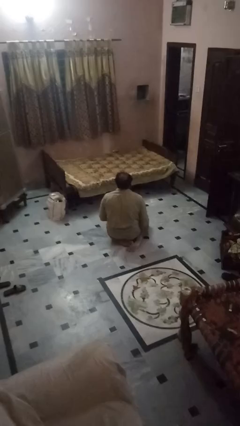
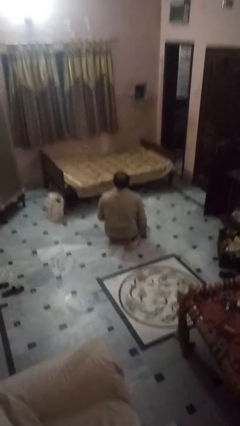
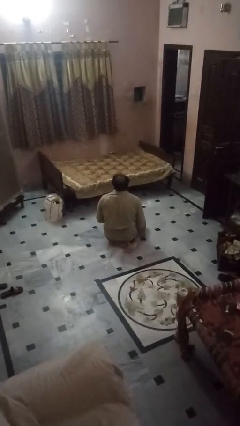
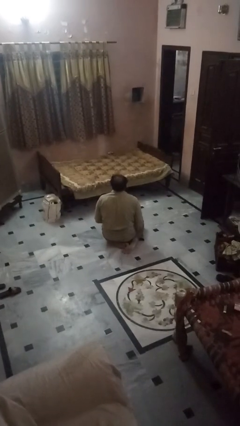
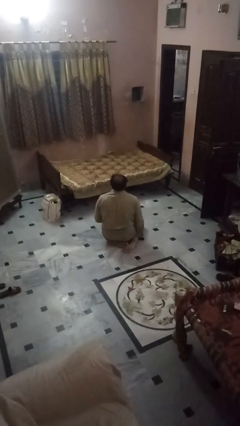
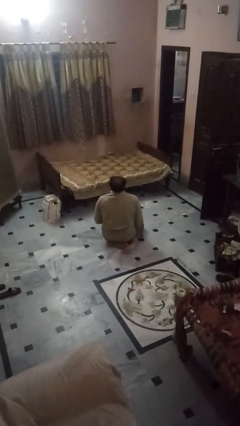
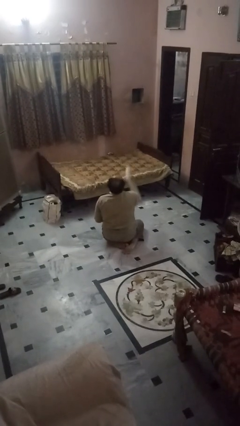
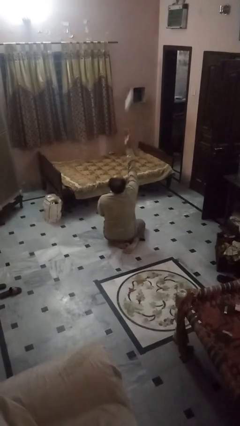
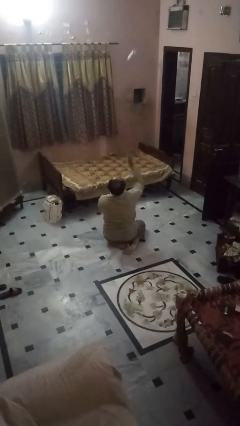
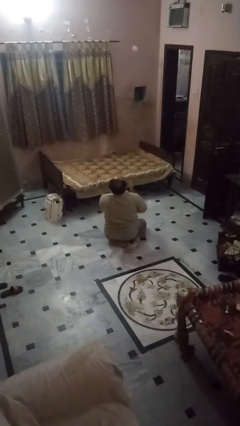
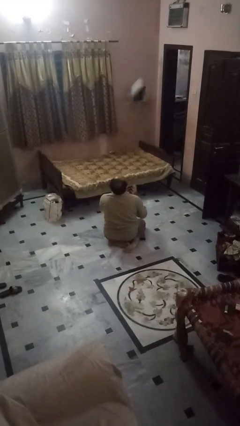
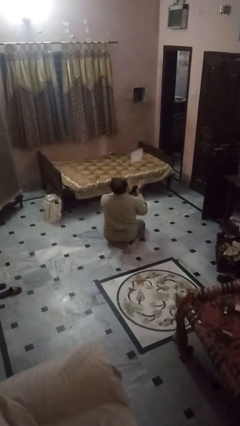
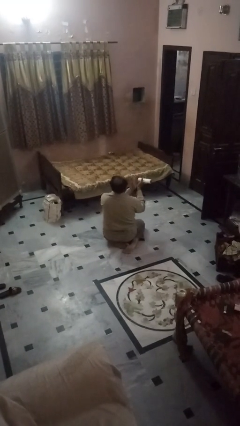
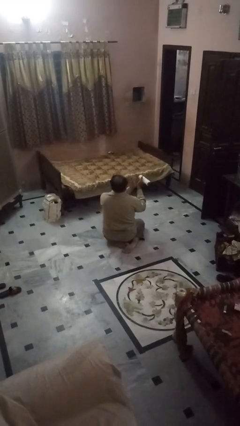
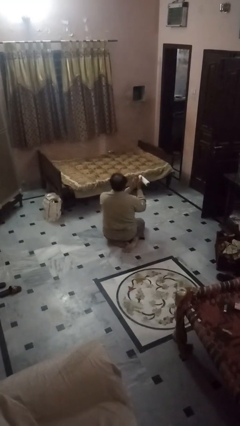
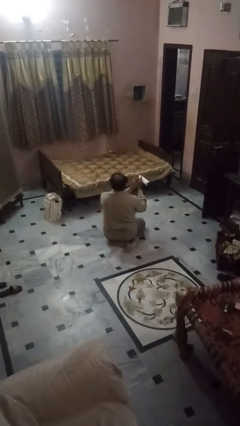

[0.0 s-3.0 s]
person drops object

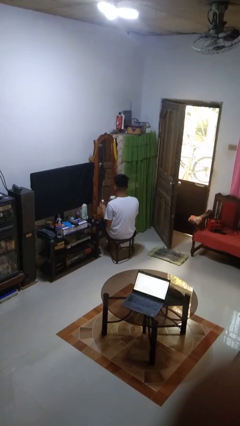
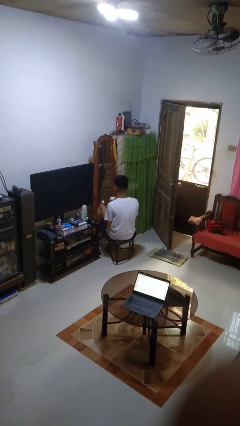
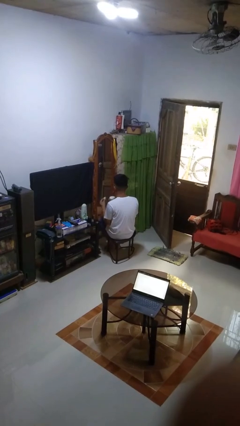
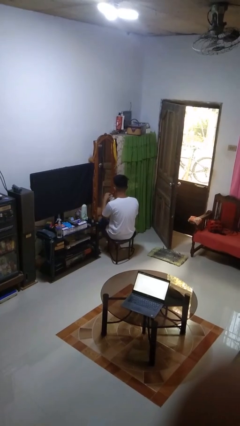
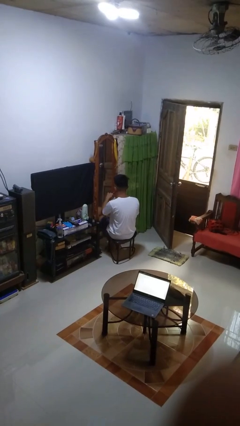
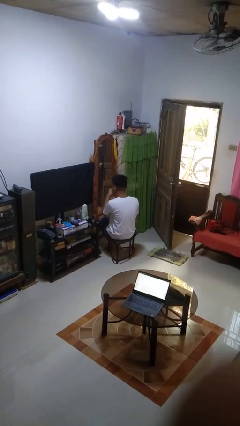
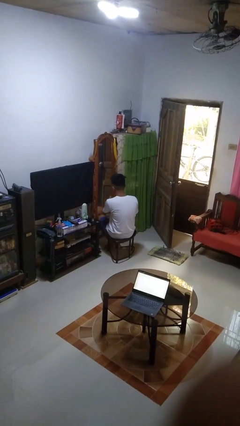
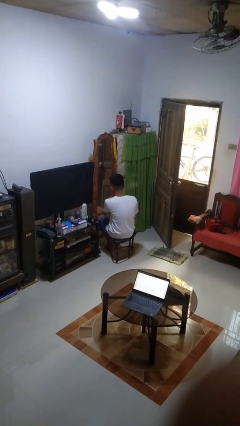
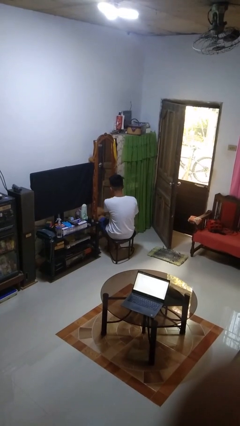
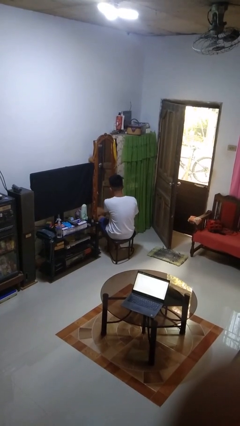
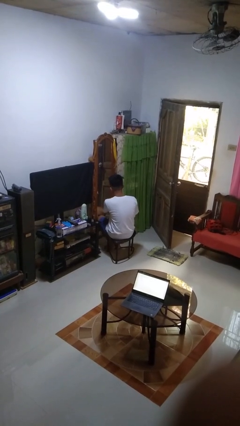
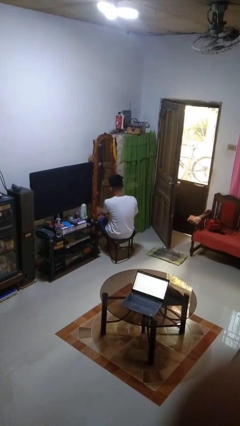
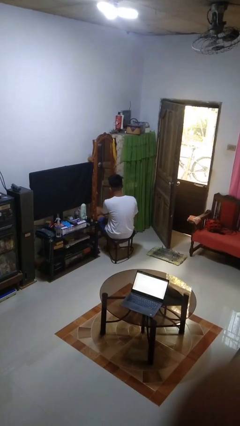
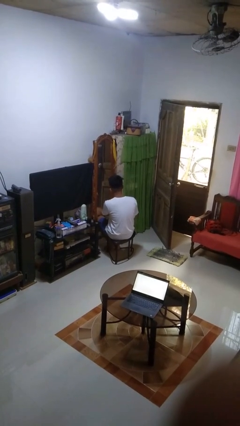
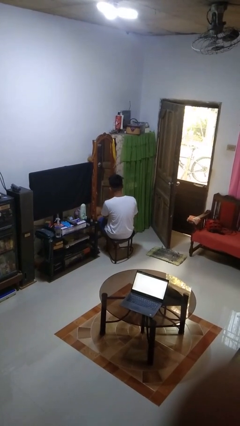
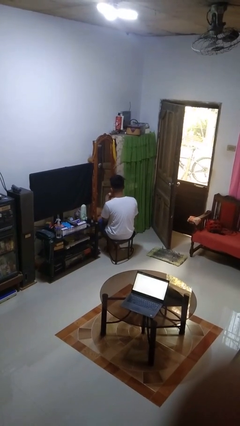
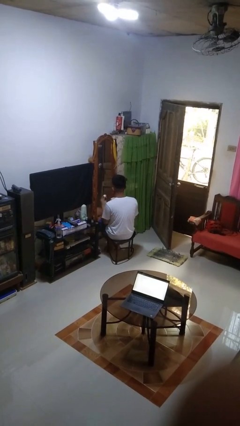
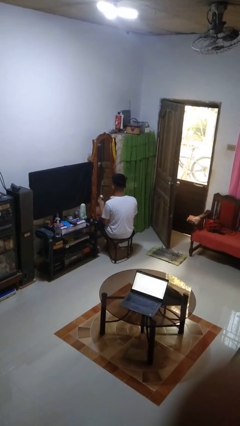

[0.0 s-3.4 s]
person applies foundation makeup

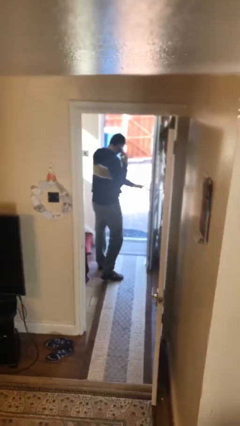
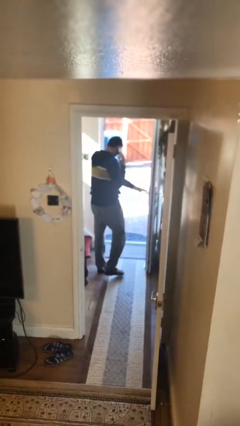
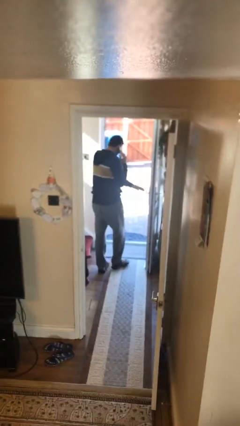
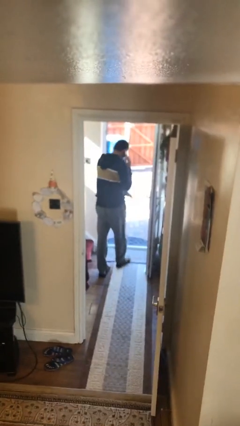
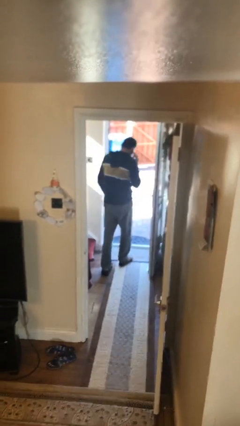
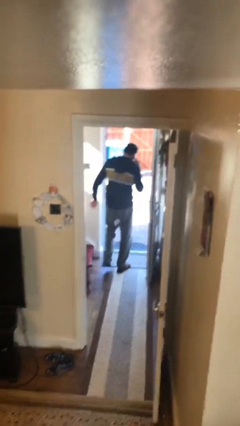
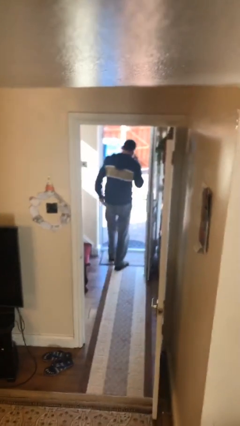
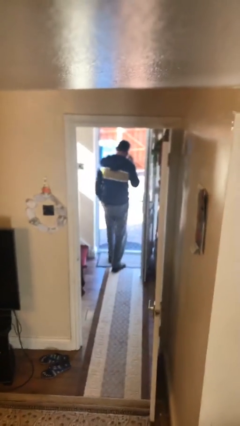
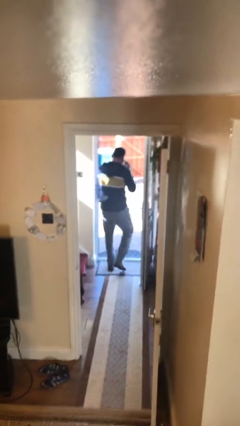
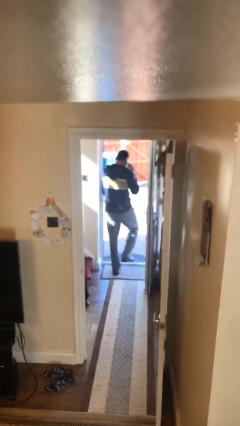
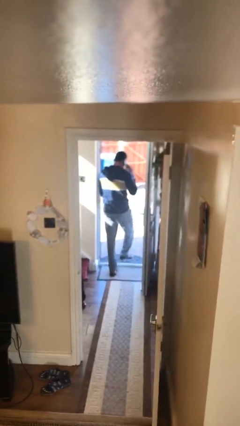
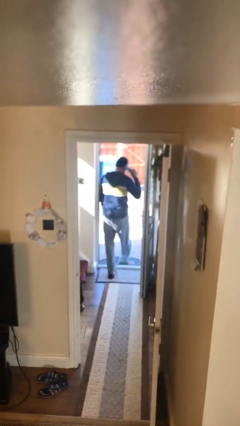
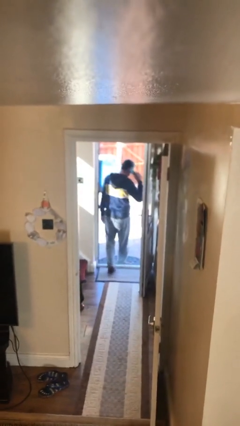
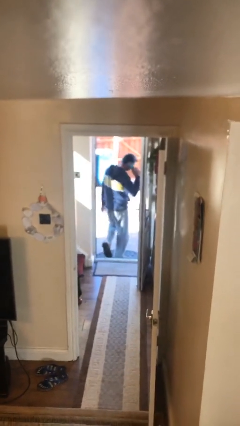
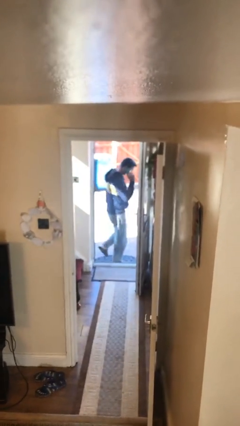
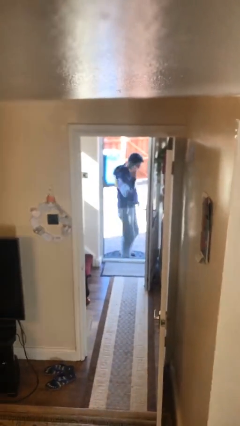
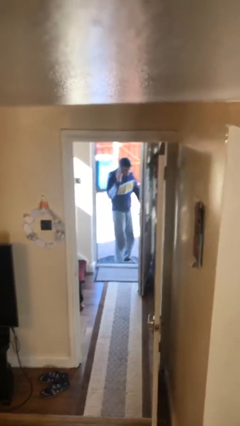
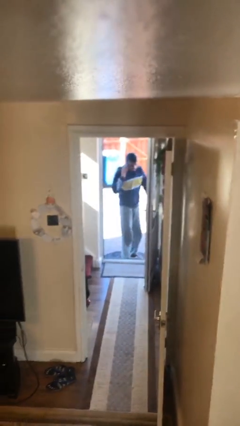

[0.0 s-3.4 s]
person exits scene through structure

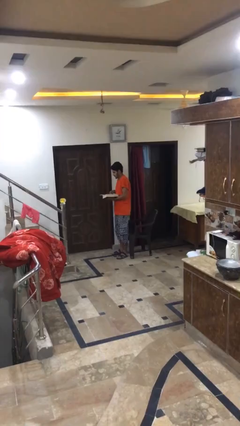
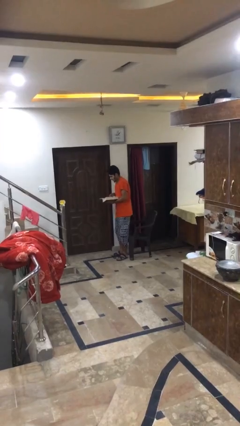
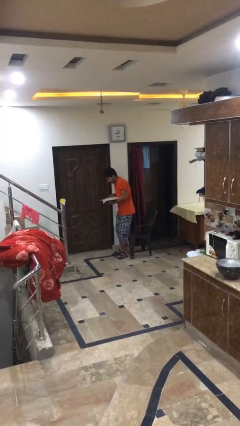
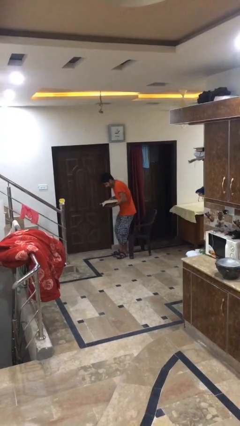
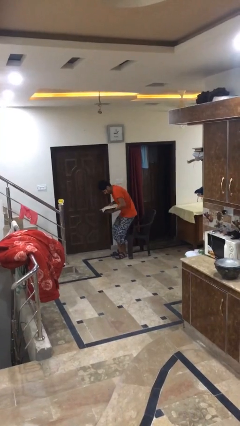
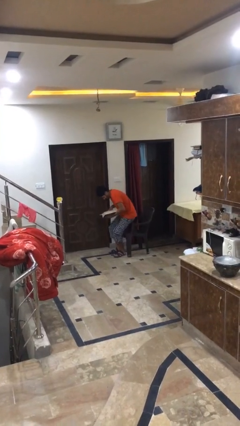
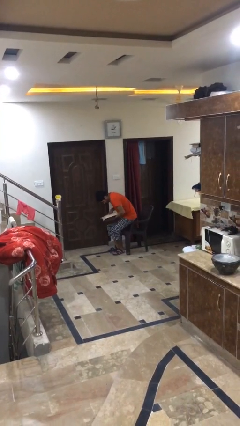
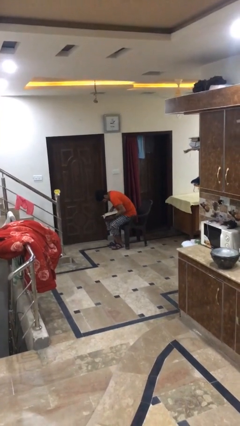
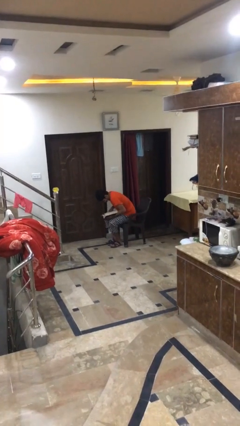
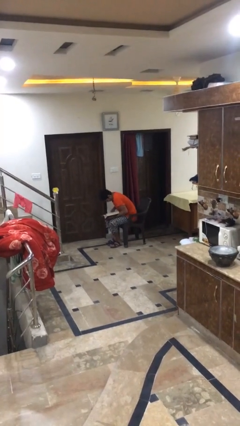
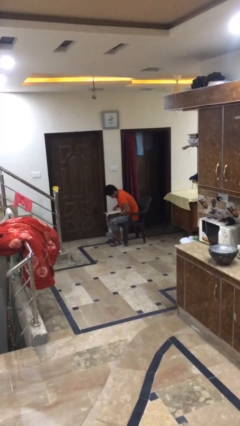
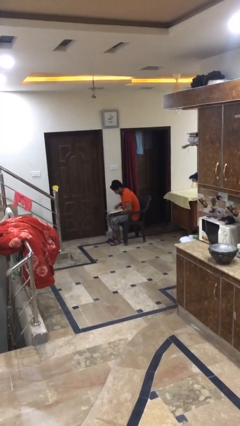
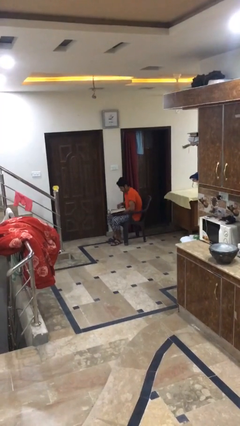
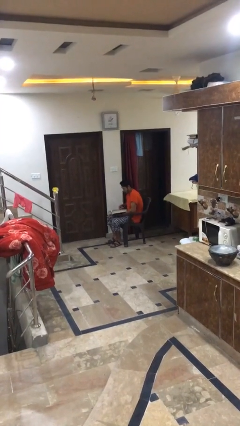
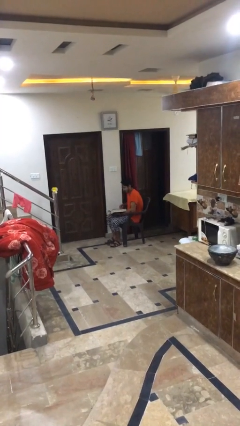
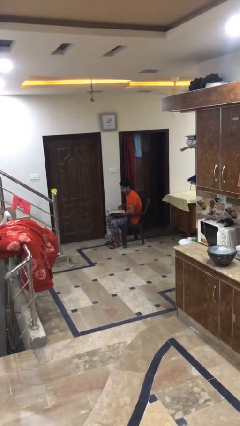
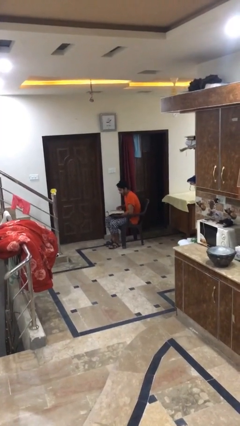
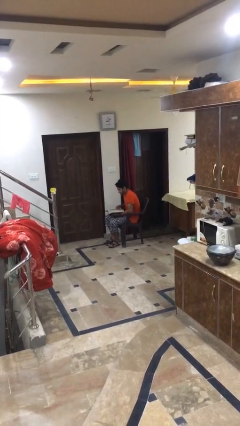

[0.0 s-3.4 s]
person sits down

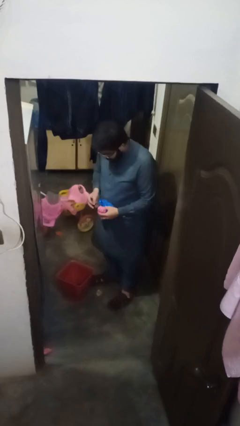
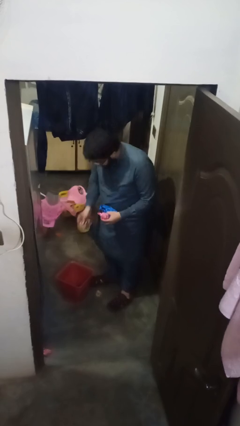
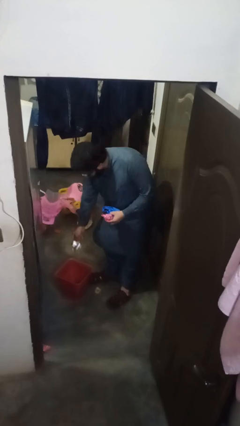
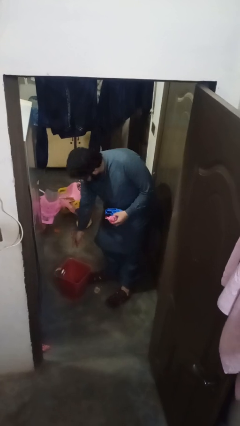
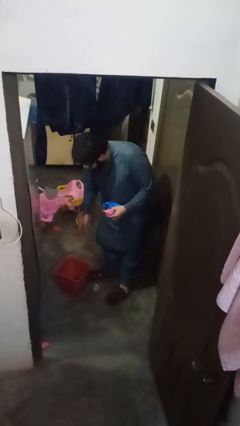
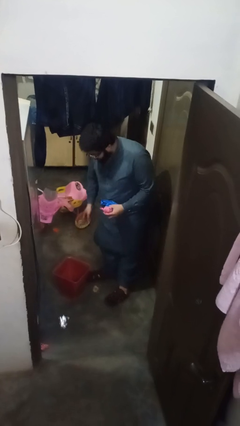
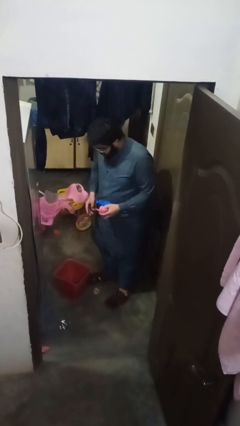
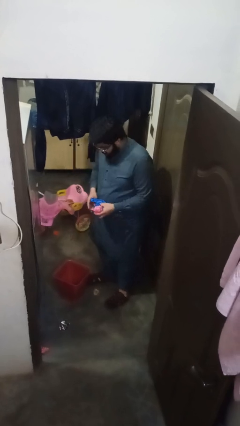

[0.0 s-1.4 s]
person discards trash

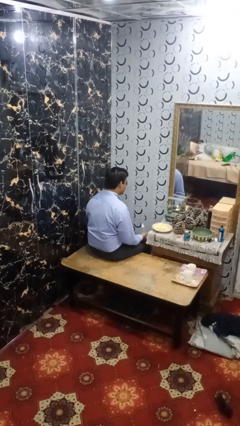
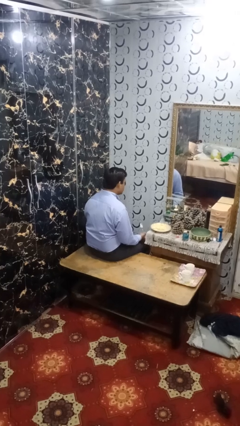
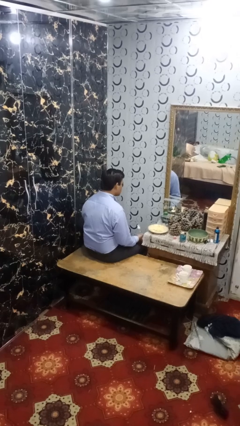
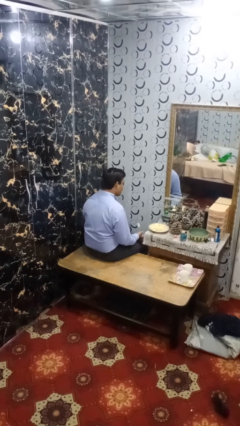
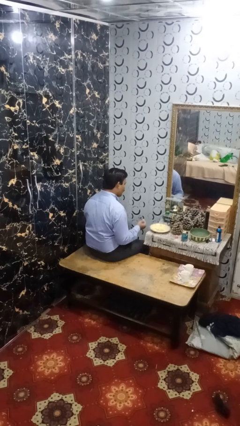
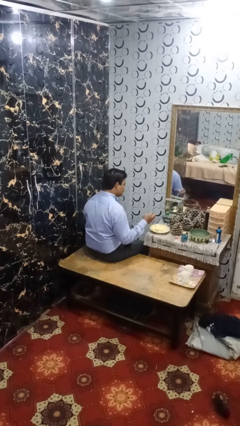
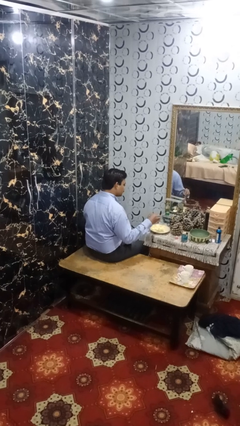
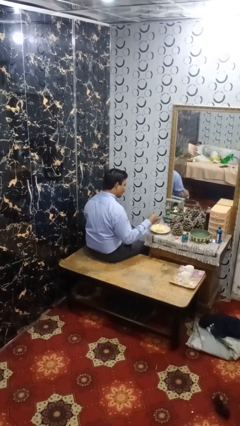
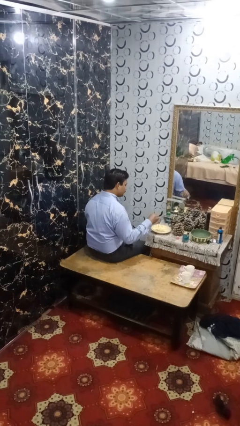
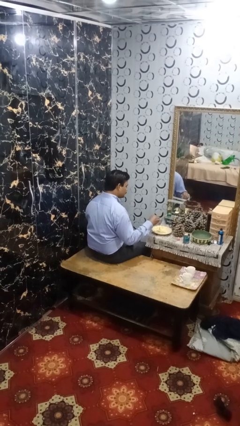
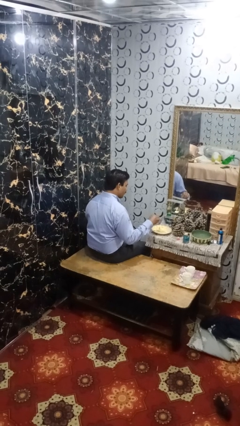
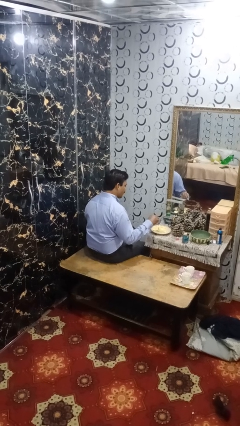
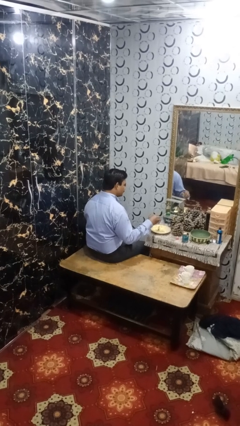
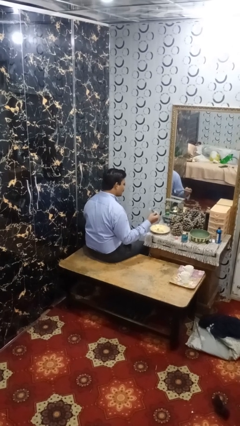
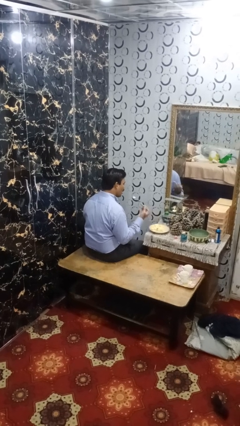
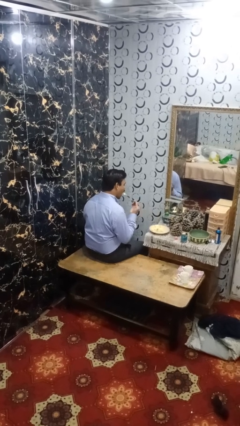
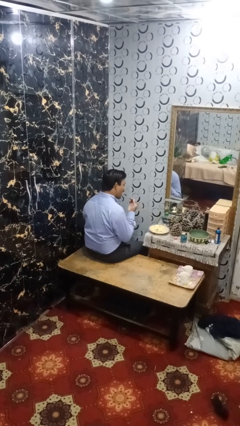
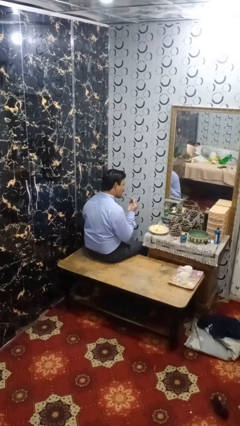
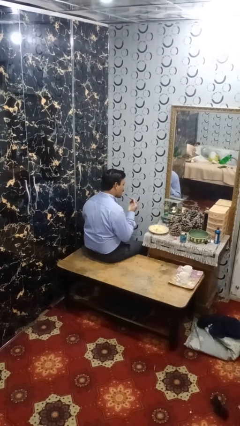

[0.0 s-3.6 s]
person eats with utensil
